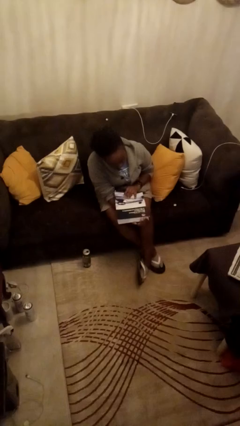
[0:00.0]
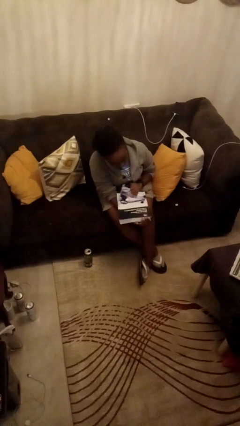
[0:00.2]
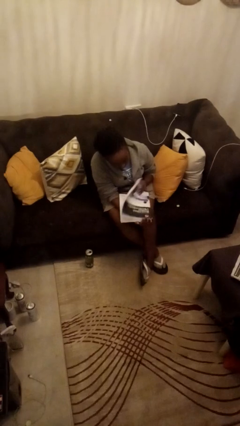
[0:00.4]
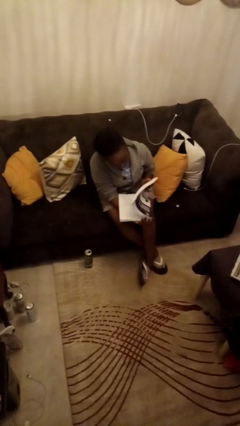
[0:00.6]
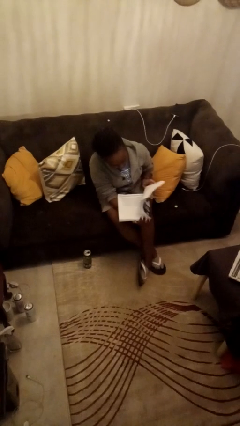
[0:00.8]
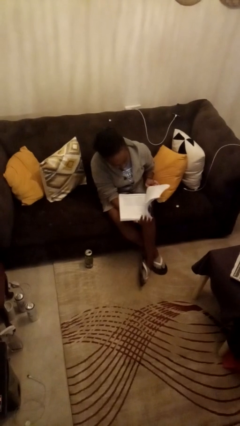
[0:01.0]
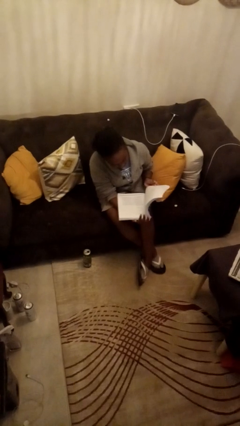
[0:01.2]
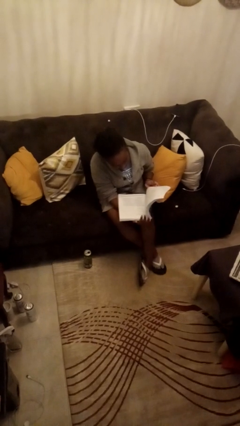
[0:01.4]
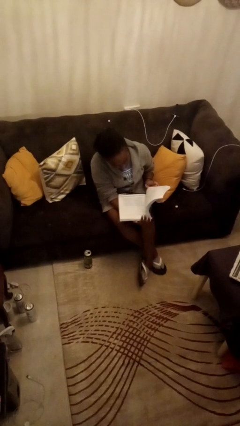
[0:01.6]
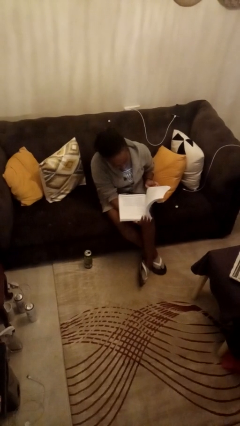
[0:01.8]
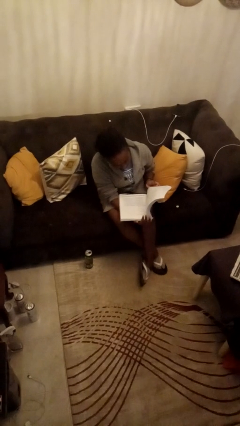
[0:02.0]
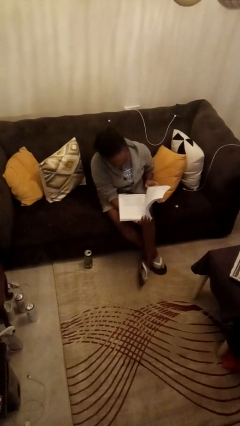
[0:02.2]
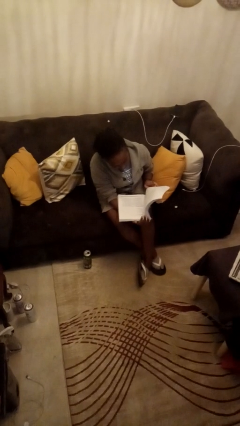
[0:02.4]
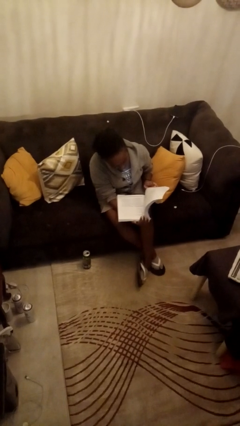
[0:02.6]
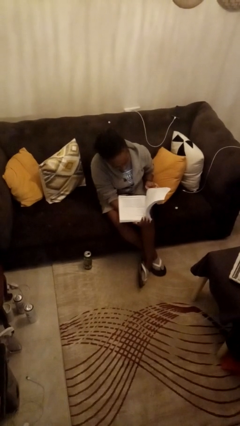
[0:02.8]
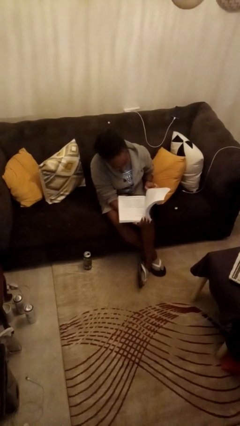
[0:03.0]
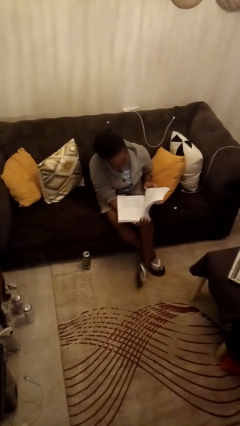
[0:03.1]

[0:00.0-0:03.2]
person reads book

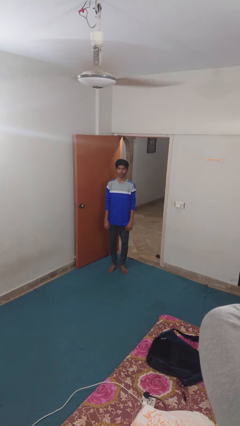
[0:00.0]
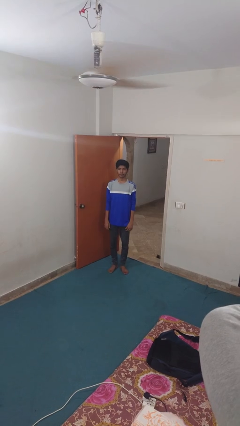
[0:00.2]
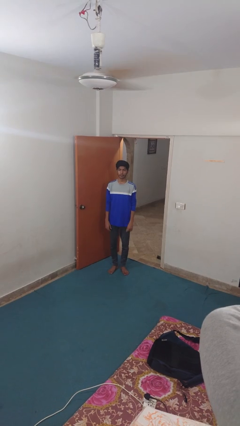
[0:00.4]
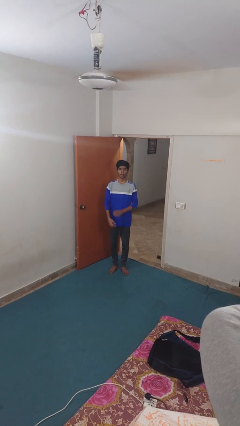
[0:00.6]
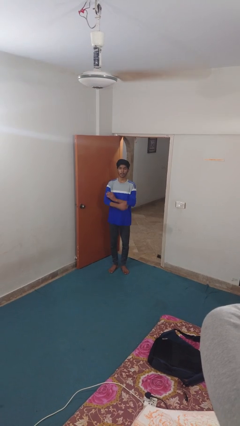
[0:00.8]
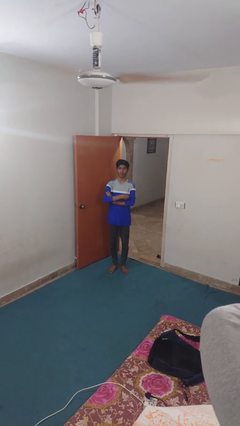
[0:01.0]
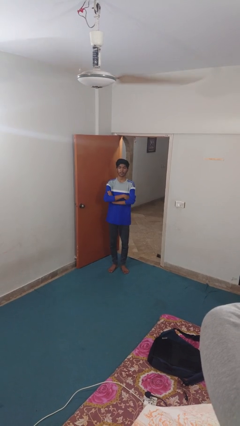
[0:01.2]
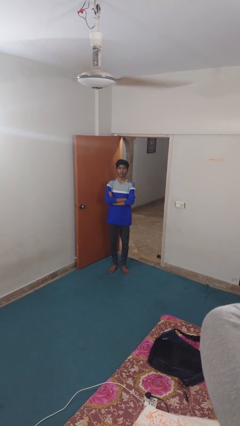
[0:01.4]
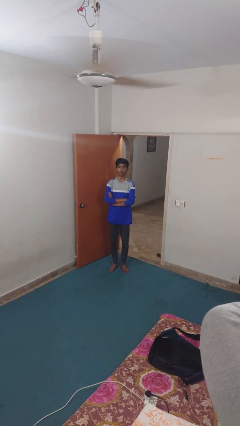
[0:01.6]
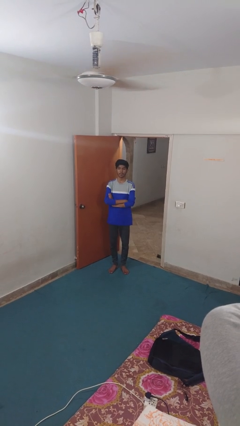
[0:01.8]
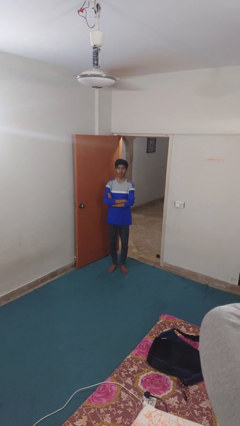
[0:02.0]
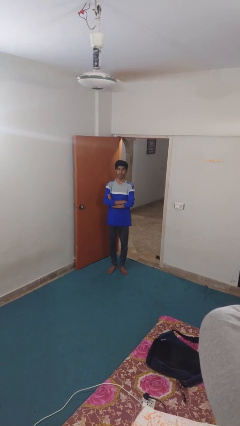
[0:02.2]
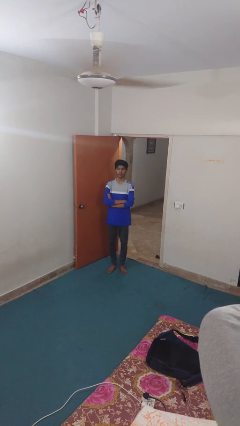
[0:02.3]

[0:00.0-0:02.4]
person crosses arms

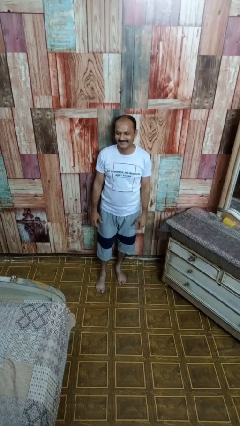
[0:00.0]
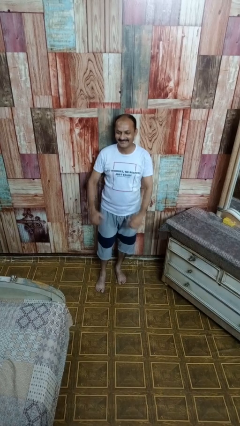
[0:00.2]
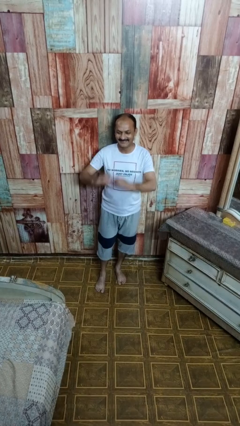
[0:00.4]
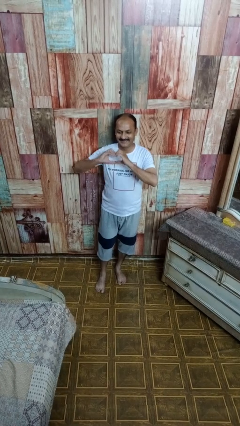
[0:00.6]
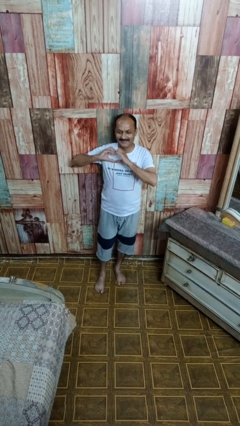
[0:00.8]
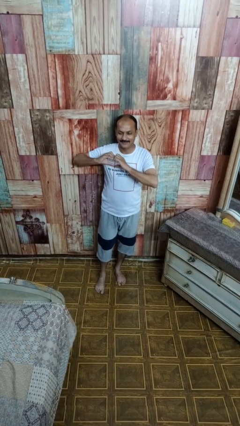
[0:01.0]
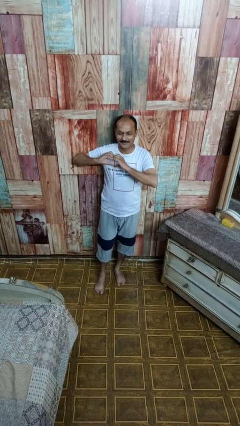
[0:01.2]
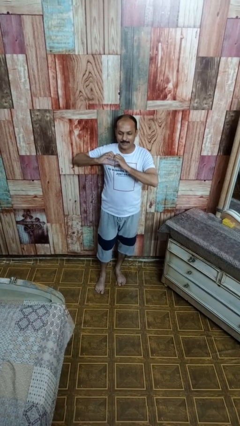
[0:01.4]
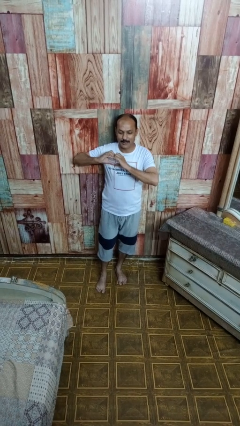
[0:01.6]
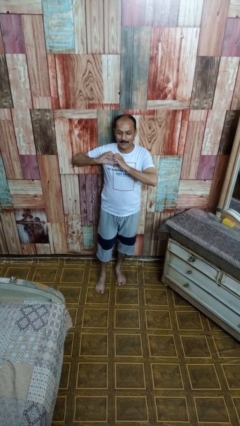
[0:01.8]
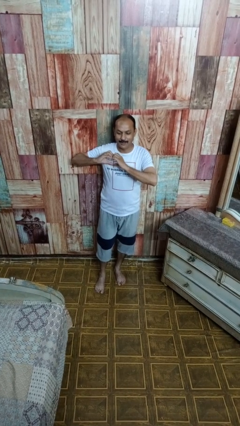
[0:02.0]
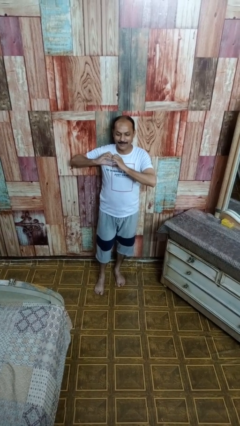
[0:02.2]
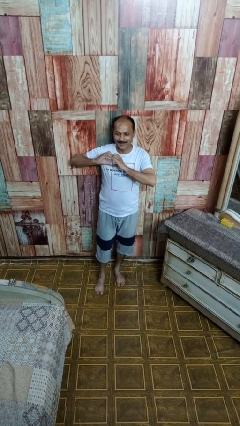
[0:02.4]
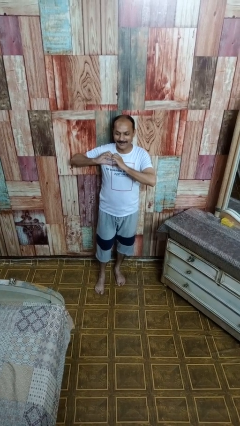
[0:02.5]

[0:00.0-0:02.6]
person gestures heart

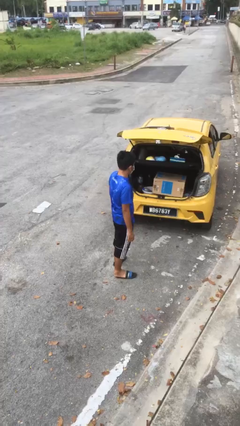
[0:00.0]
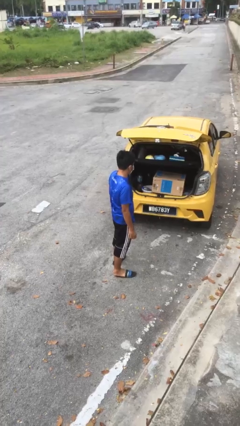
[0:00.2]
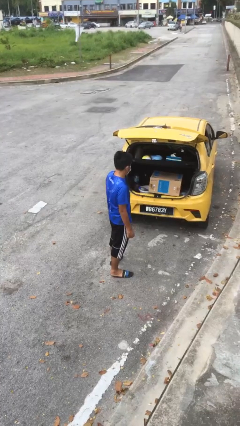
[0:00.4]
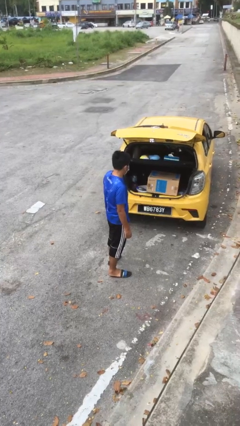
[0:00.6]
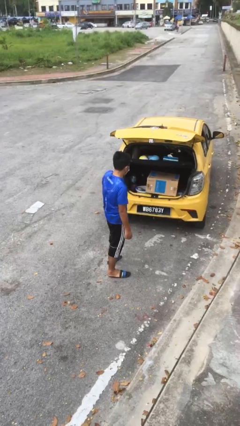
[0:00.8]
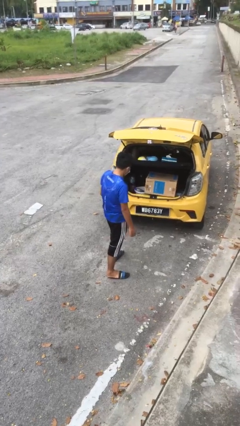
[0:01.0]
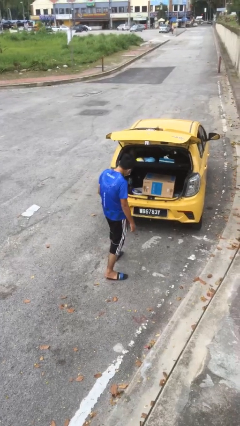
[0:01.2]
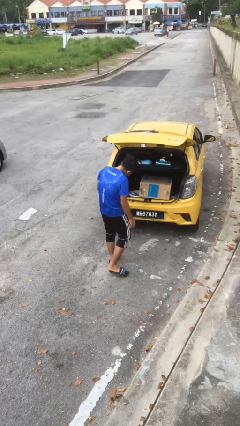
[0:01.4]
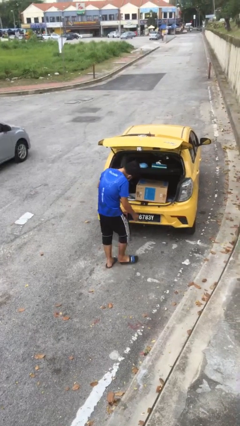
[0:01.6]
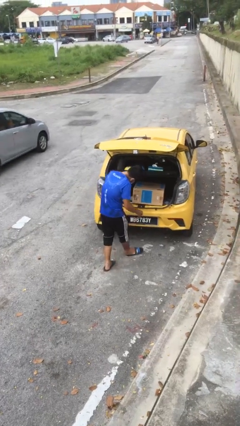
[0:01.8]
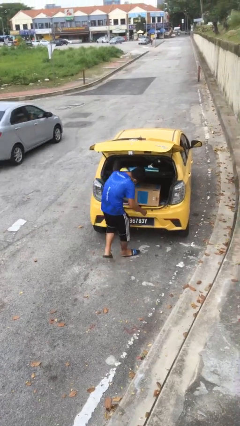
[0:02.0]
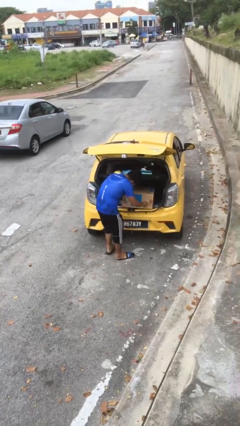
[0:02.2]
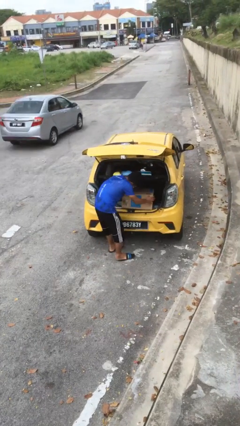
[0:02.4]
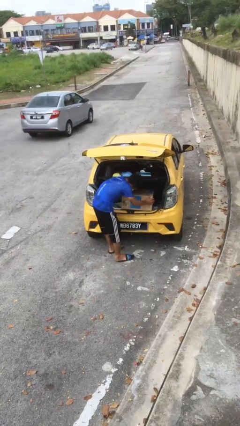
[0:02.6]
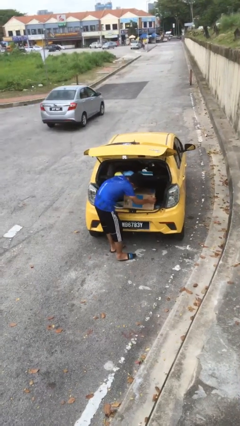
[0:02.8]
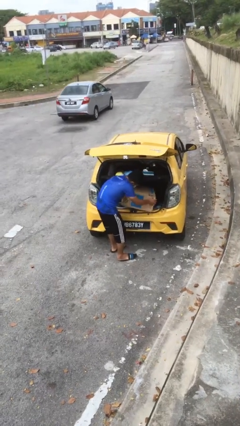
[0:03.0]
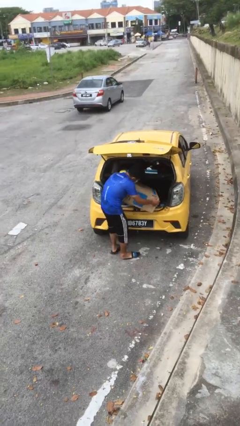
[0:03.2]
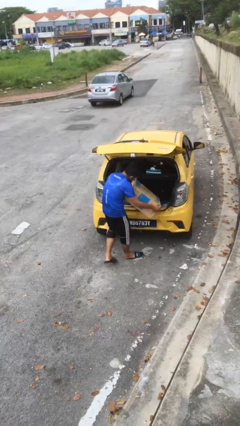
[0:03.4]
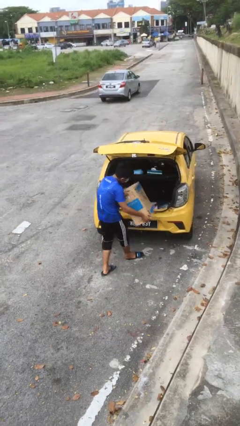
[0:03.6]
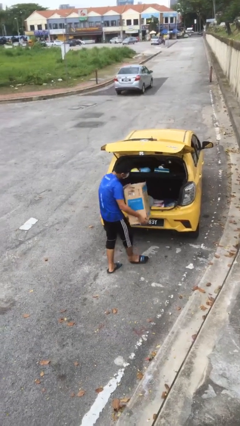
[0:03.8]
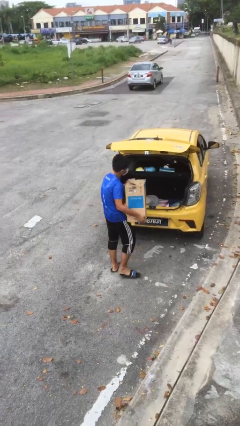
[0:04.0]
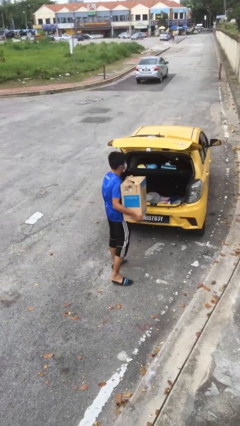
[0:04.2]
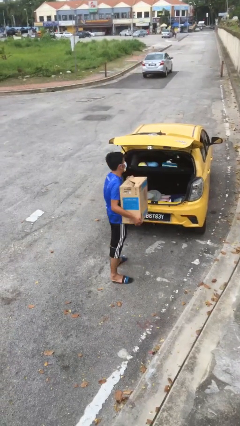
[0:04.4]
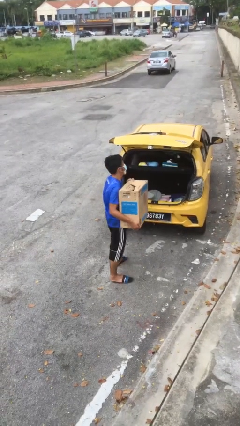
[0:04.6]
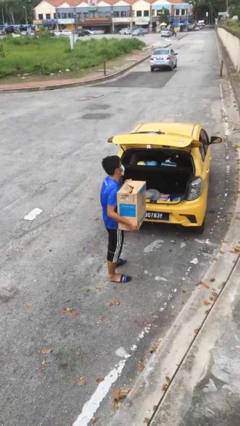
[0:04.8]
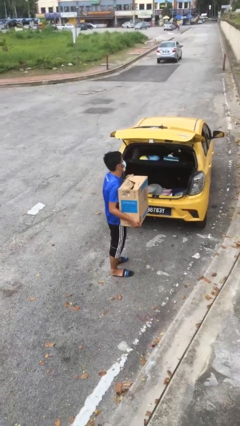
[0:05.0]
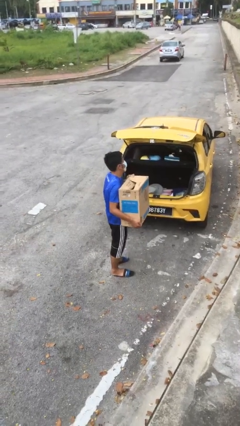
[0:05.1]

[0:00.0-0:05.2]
person unloads car

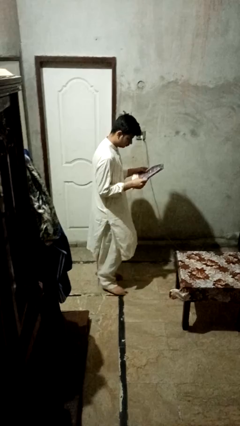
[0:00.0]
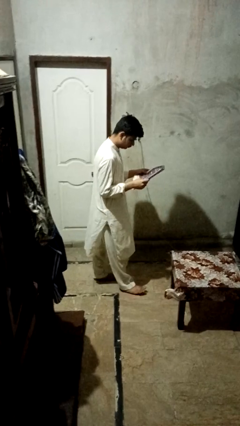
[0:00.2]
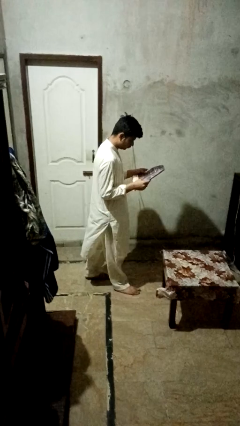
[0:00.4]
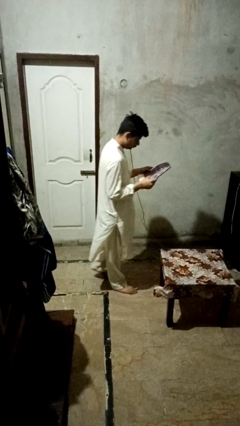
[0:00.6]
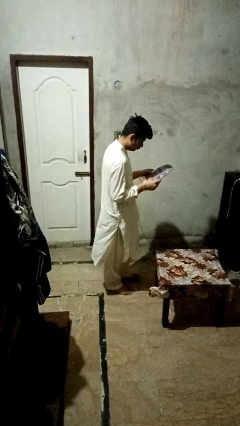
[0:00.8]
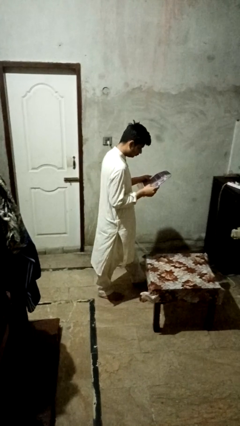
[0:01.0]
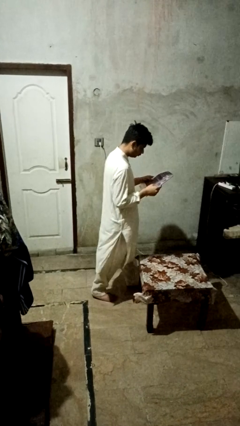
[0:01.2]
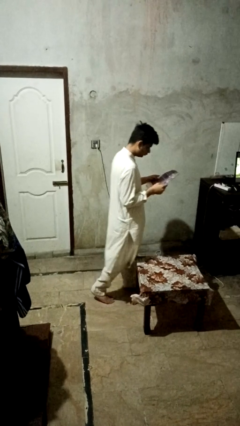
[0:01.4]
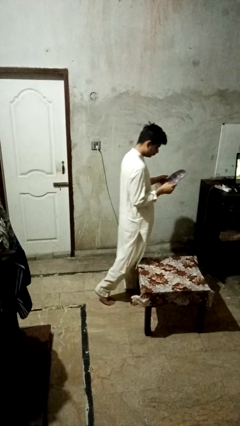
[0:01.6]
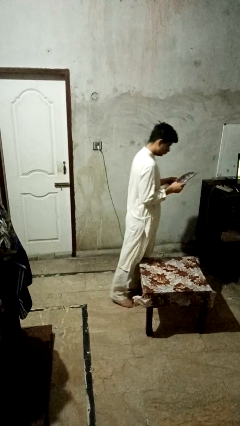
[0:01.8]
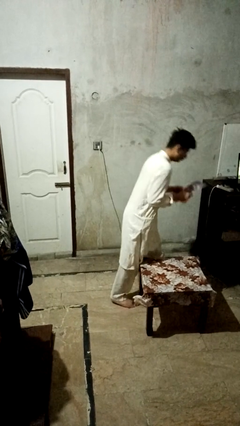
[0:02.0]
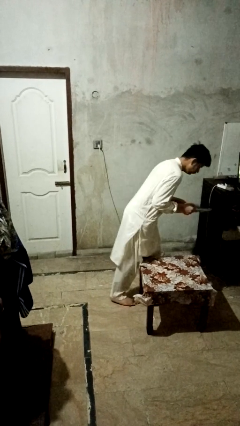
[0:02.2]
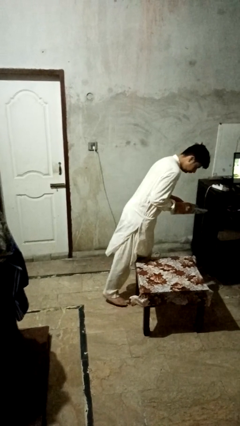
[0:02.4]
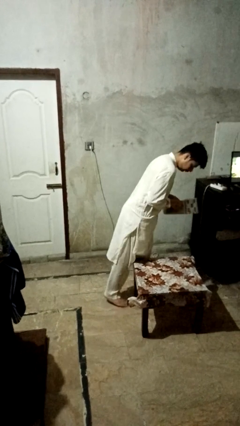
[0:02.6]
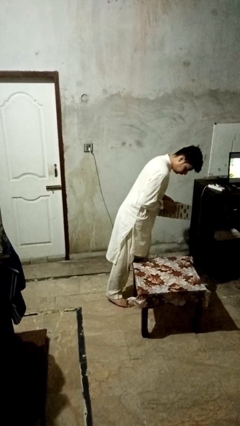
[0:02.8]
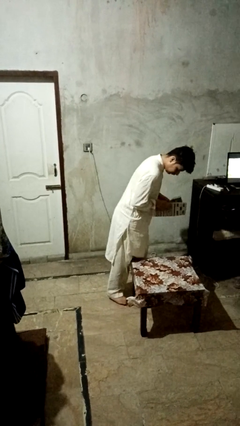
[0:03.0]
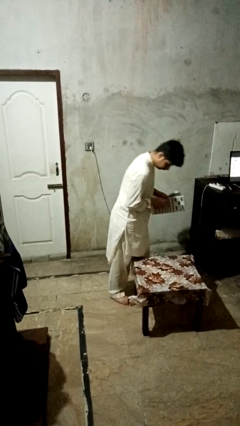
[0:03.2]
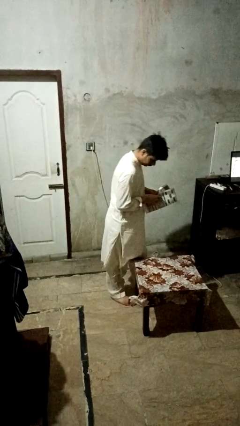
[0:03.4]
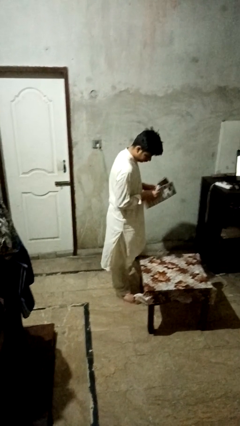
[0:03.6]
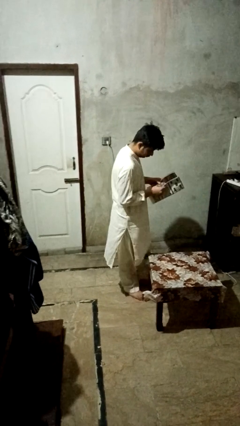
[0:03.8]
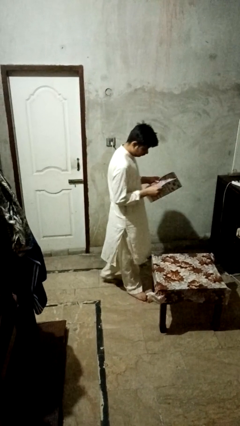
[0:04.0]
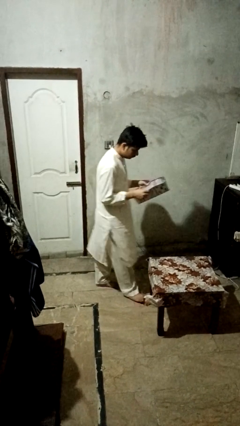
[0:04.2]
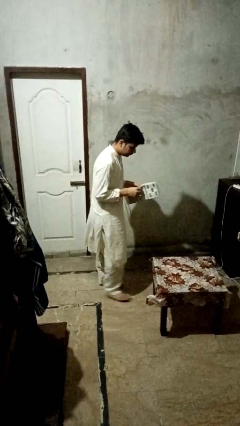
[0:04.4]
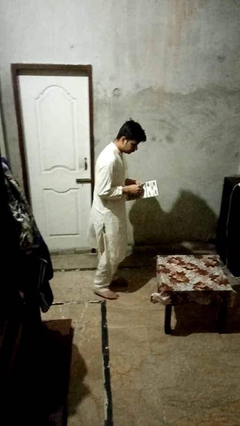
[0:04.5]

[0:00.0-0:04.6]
person bumps into table
